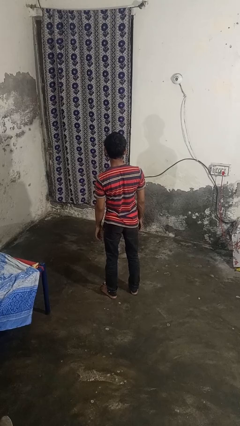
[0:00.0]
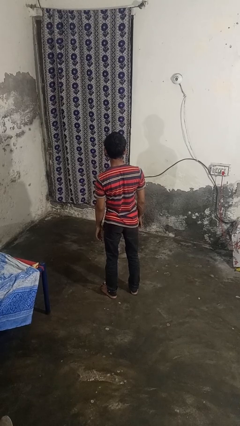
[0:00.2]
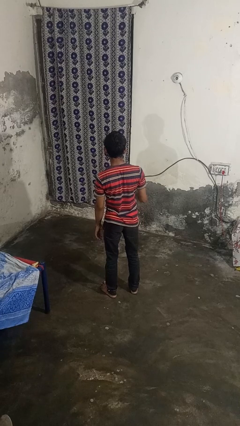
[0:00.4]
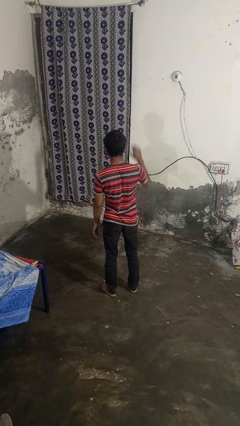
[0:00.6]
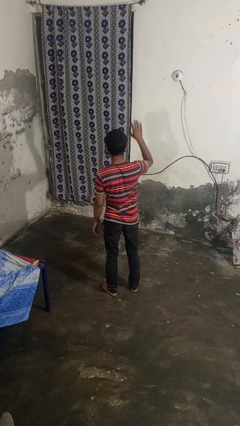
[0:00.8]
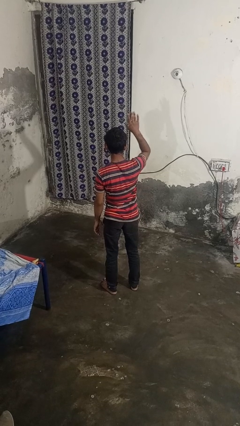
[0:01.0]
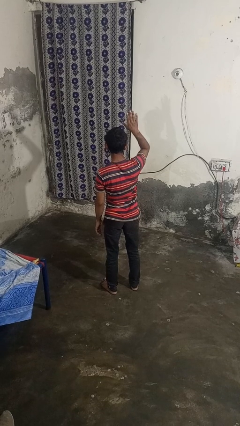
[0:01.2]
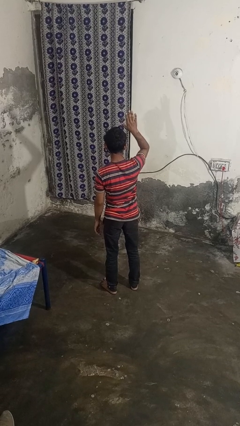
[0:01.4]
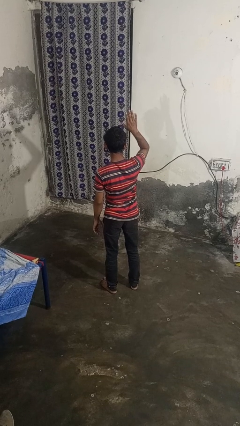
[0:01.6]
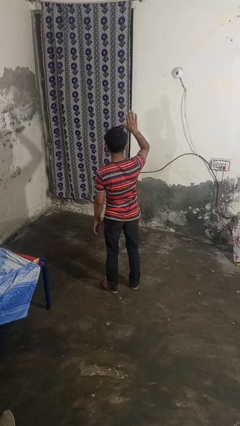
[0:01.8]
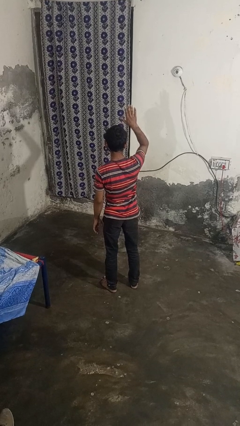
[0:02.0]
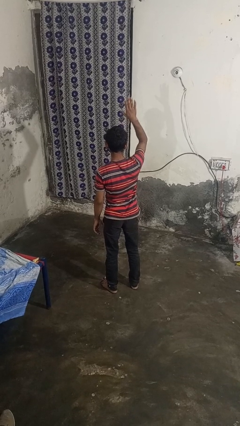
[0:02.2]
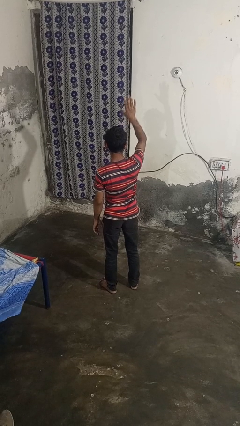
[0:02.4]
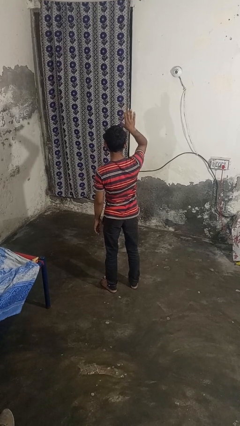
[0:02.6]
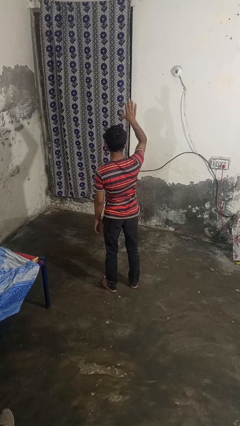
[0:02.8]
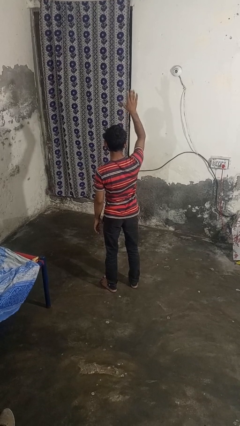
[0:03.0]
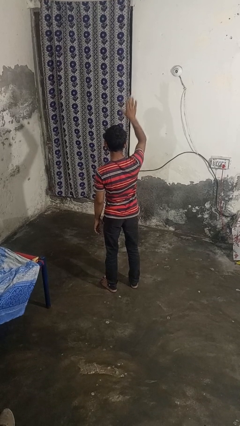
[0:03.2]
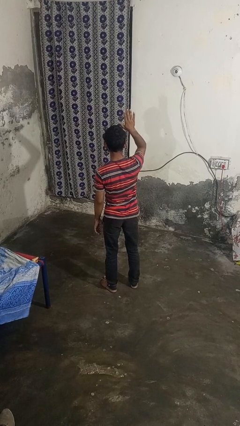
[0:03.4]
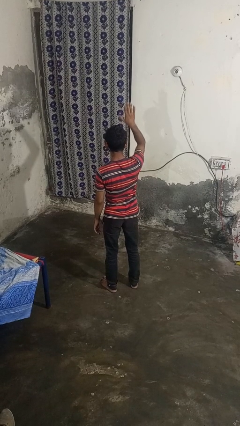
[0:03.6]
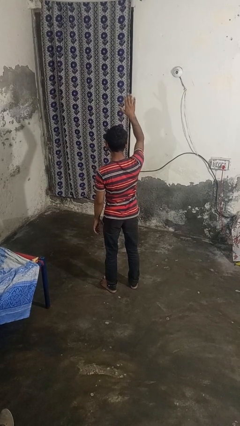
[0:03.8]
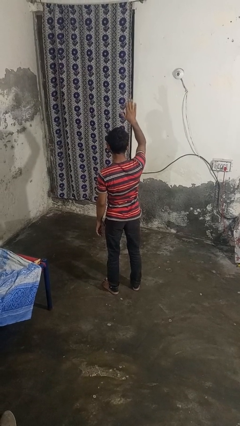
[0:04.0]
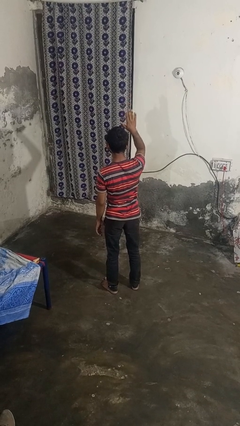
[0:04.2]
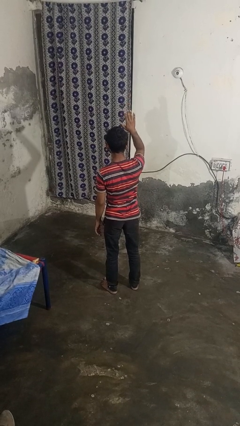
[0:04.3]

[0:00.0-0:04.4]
person gestures raise hand

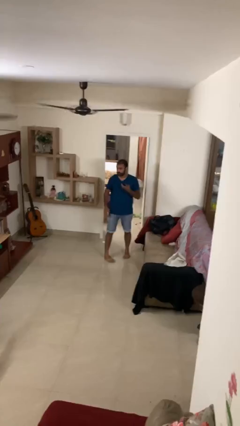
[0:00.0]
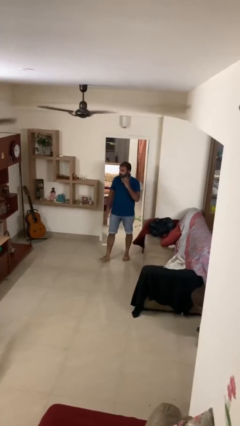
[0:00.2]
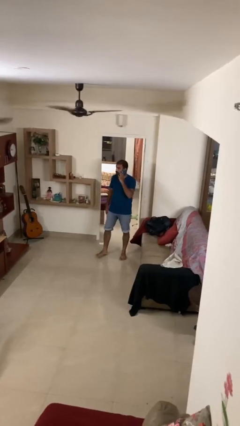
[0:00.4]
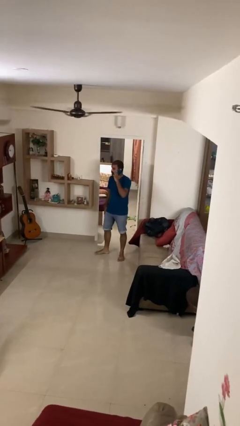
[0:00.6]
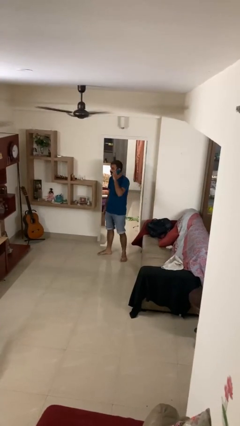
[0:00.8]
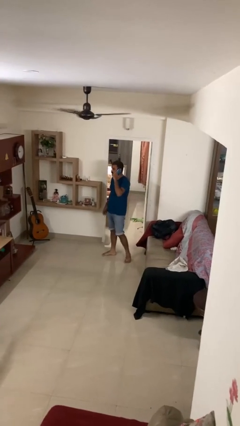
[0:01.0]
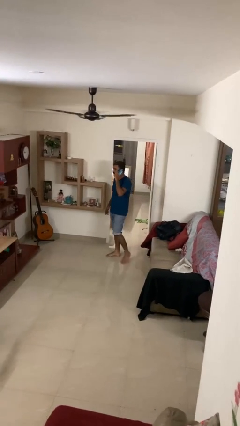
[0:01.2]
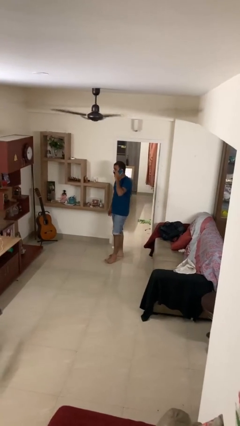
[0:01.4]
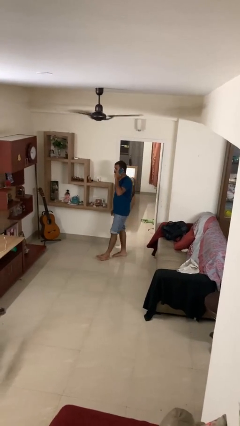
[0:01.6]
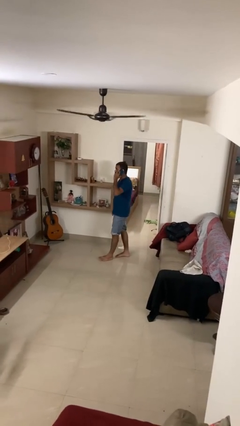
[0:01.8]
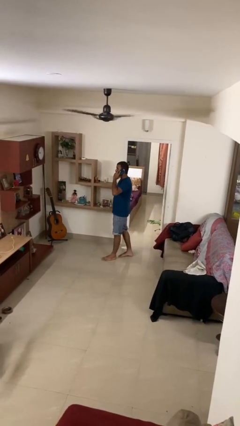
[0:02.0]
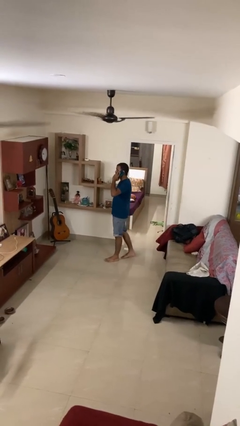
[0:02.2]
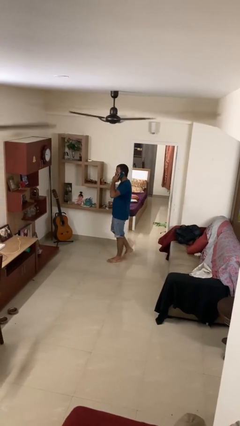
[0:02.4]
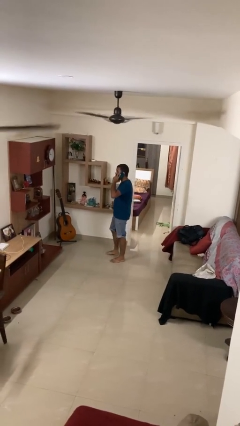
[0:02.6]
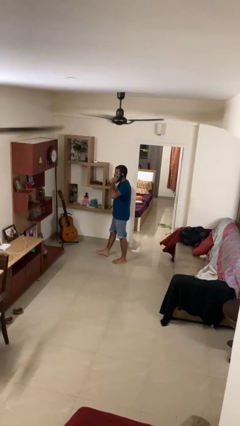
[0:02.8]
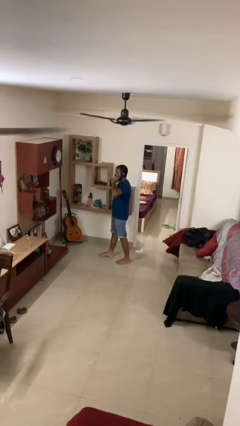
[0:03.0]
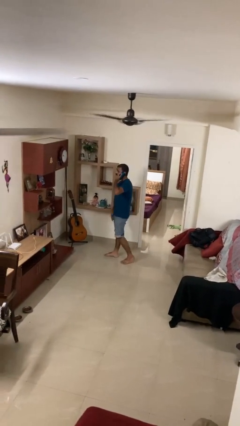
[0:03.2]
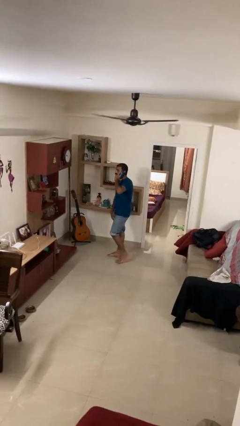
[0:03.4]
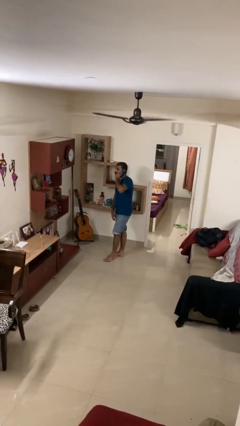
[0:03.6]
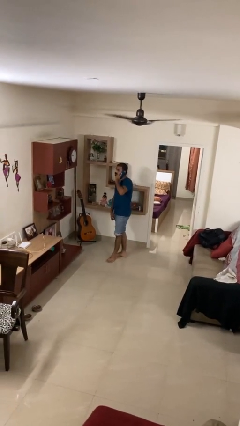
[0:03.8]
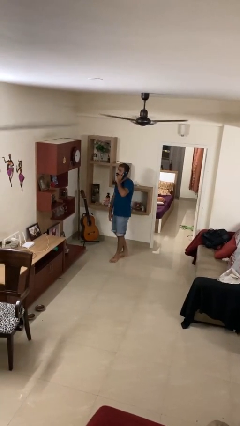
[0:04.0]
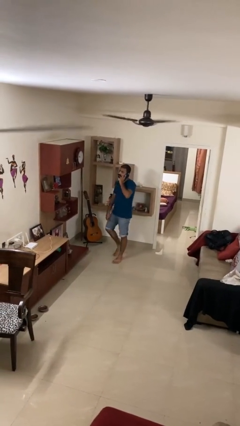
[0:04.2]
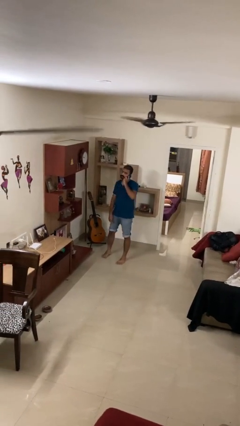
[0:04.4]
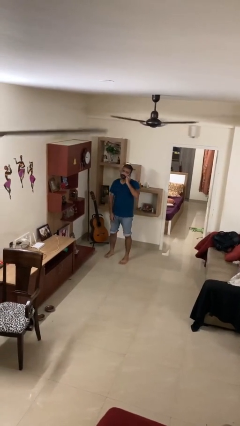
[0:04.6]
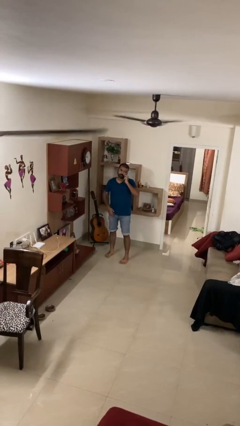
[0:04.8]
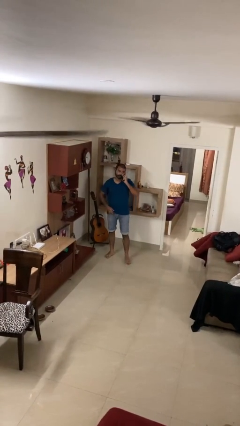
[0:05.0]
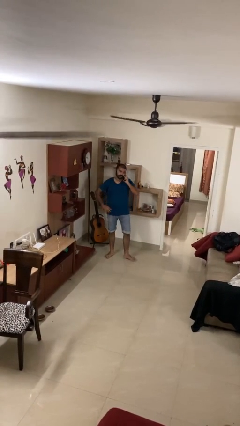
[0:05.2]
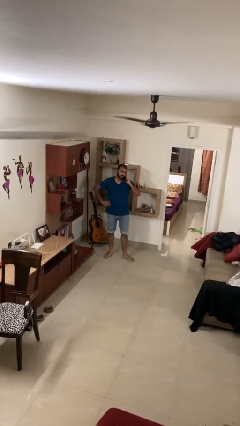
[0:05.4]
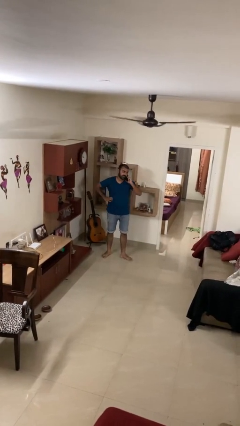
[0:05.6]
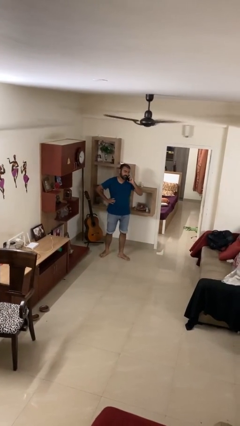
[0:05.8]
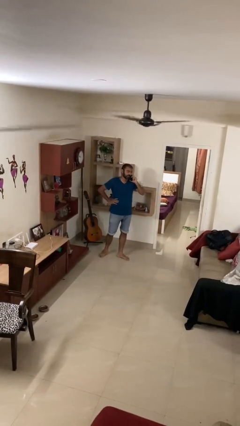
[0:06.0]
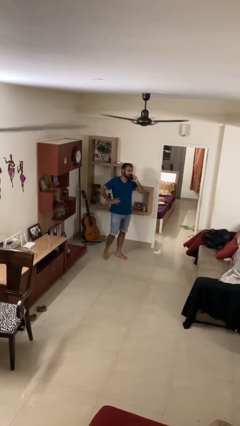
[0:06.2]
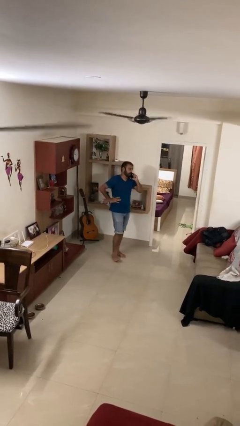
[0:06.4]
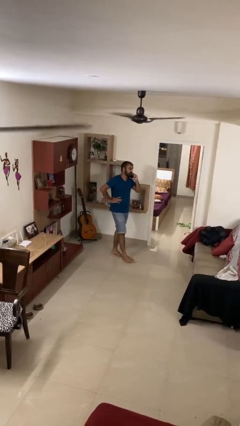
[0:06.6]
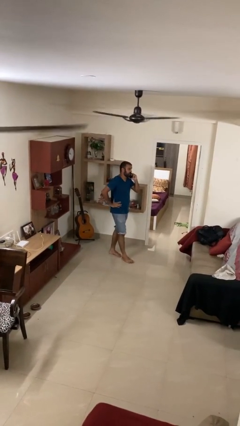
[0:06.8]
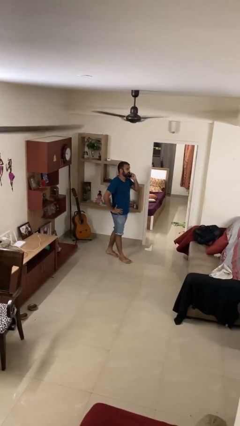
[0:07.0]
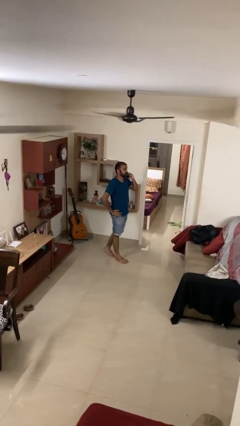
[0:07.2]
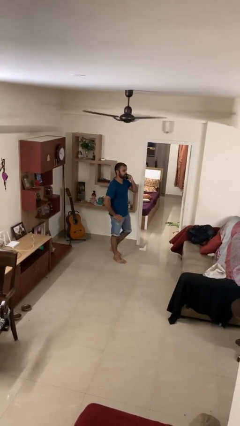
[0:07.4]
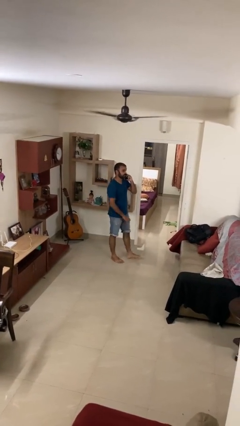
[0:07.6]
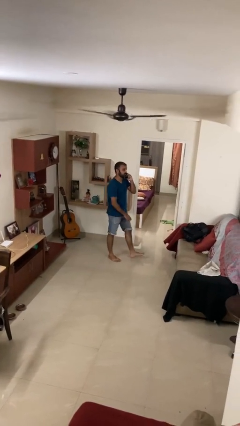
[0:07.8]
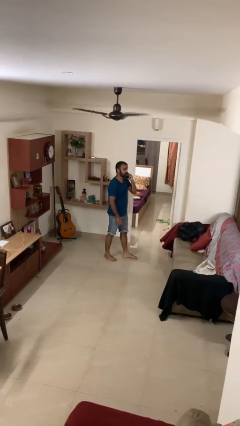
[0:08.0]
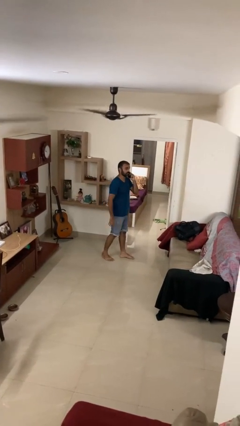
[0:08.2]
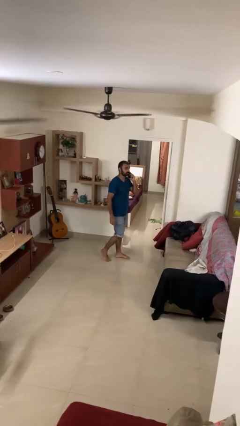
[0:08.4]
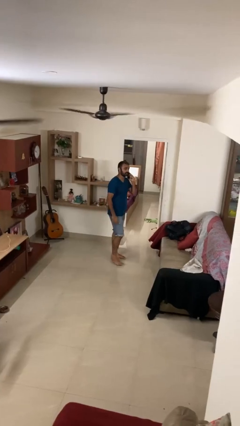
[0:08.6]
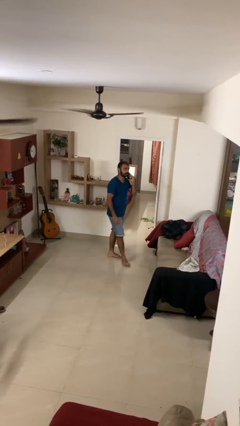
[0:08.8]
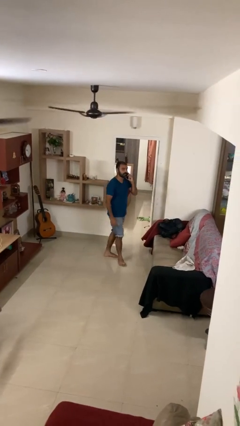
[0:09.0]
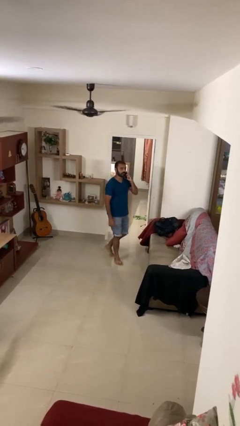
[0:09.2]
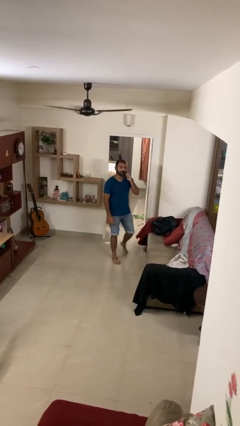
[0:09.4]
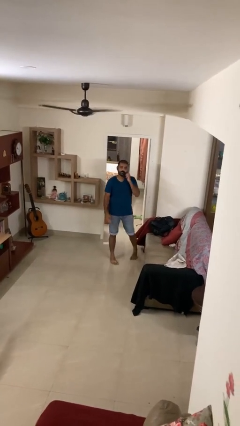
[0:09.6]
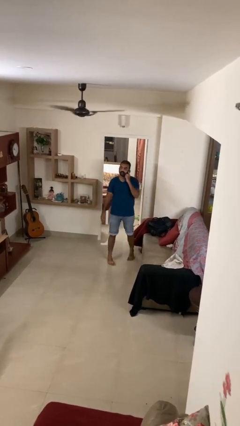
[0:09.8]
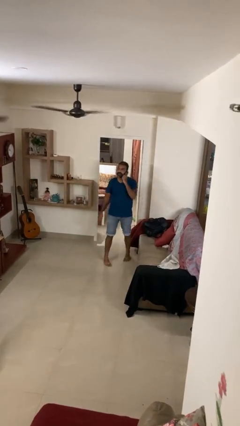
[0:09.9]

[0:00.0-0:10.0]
person talks on phone

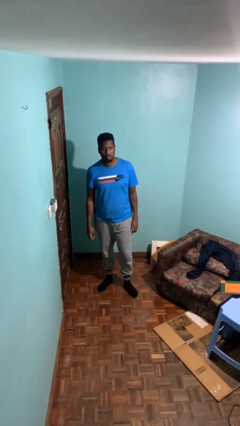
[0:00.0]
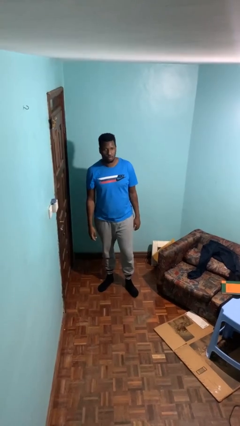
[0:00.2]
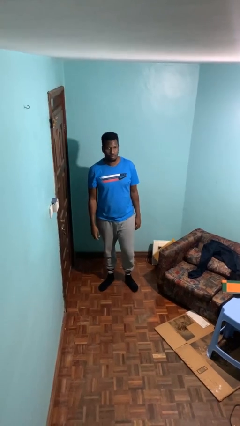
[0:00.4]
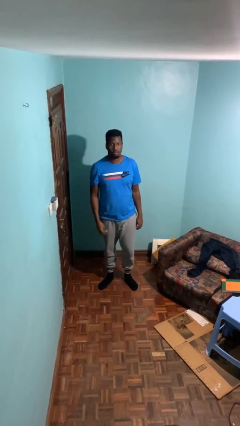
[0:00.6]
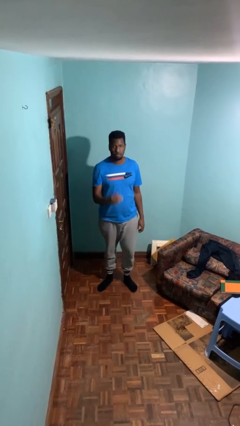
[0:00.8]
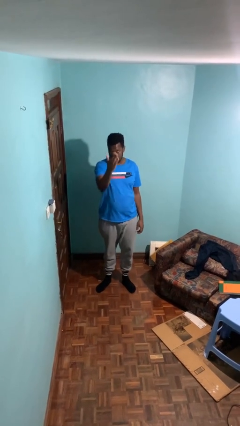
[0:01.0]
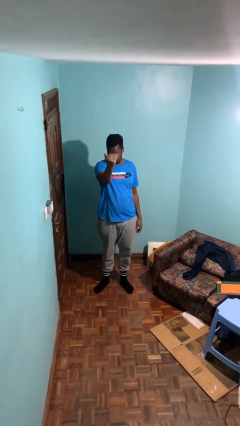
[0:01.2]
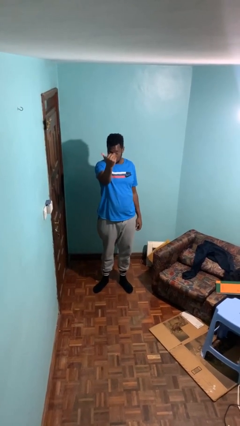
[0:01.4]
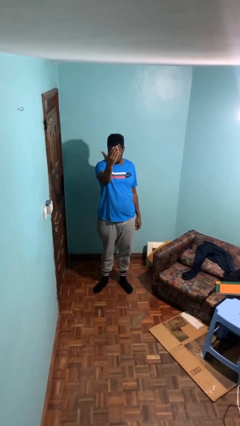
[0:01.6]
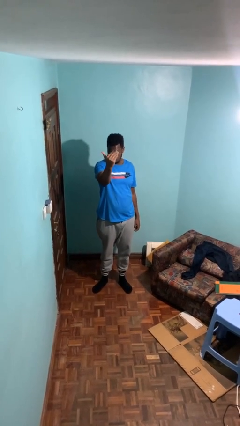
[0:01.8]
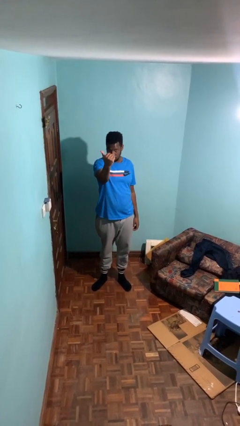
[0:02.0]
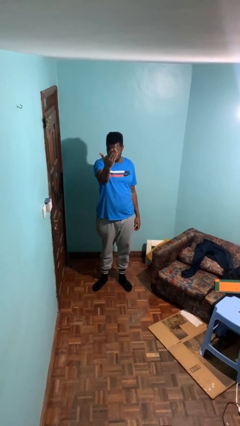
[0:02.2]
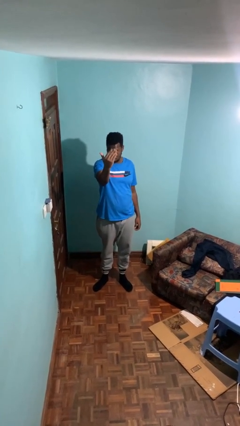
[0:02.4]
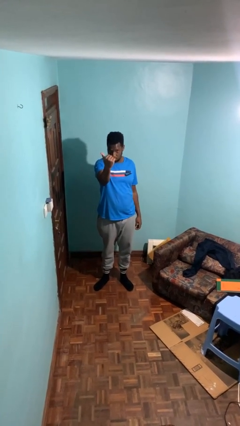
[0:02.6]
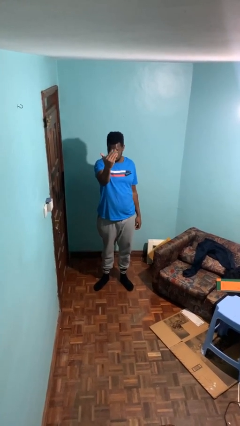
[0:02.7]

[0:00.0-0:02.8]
person gestures come here

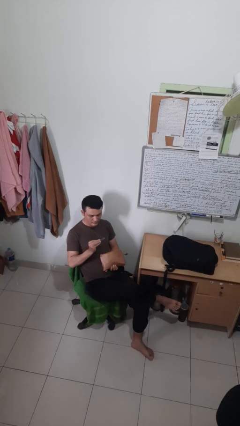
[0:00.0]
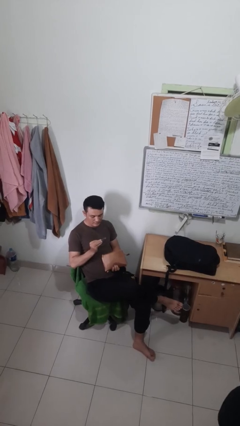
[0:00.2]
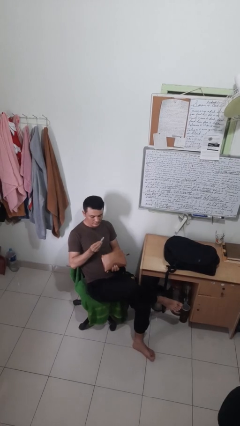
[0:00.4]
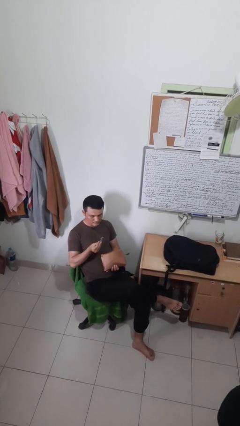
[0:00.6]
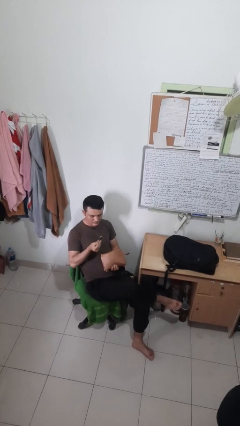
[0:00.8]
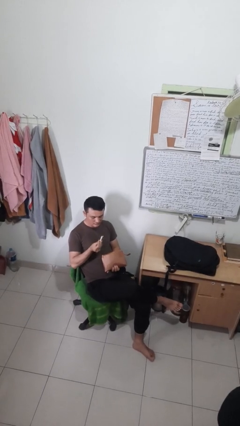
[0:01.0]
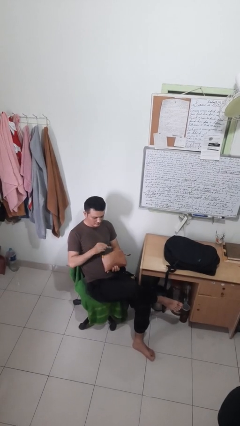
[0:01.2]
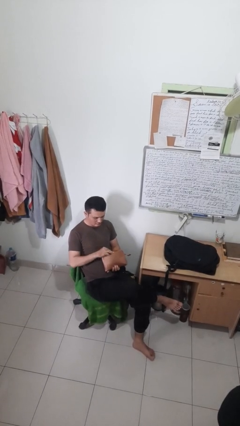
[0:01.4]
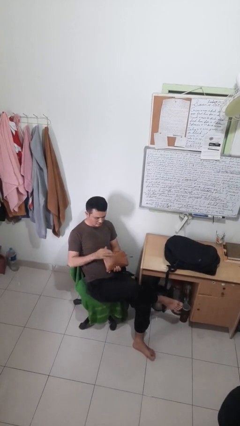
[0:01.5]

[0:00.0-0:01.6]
person puts object into purse
